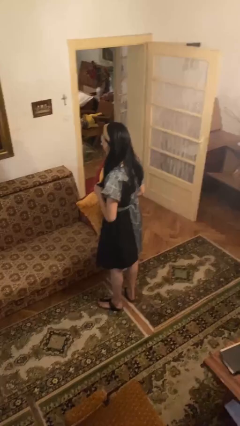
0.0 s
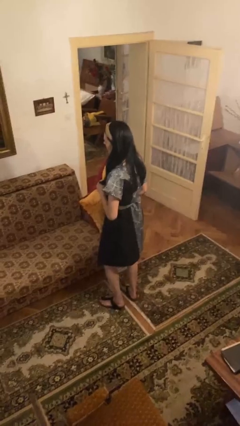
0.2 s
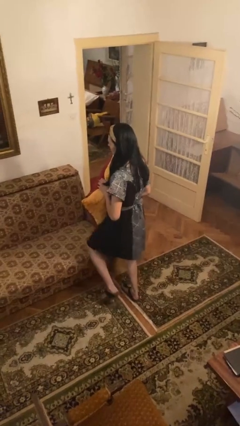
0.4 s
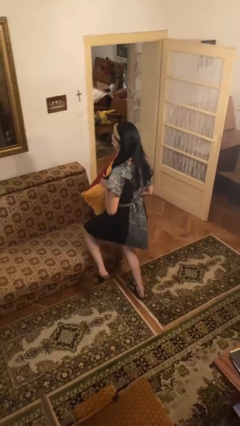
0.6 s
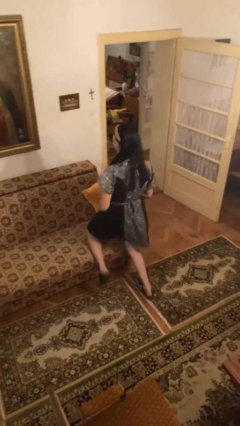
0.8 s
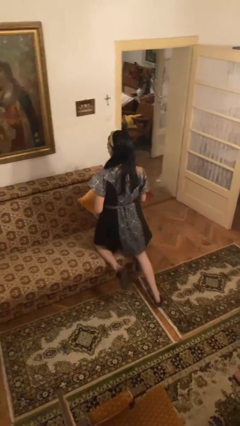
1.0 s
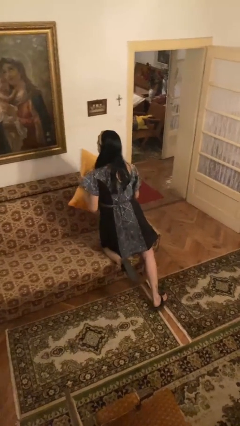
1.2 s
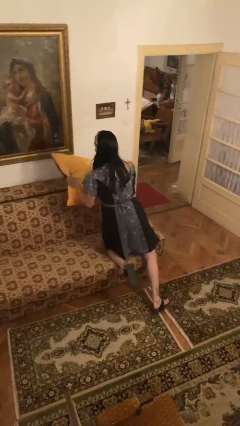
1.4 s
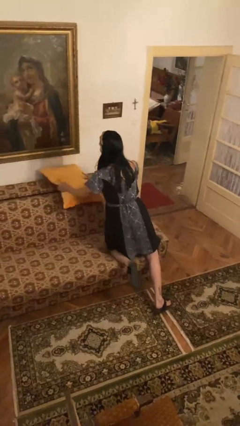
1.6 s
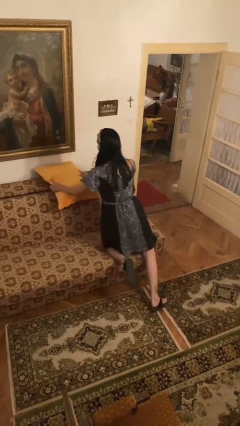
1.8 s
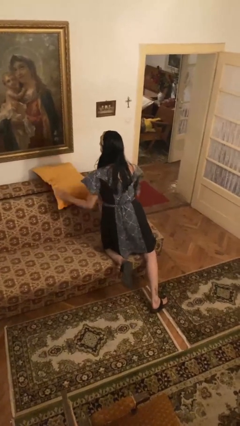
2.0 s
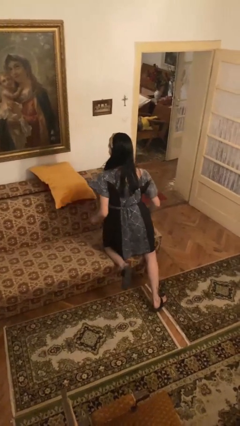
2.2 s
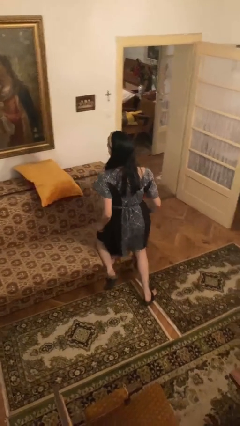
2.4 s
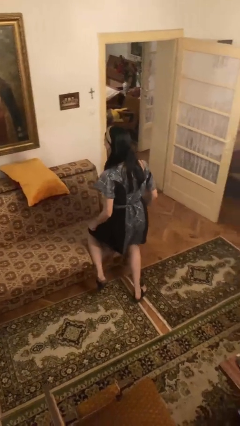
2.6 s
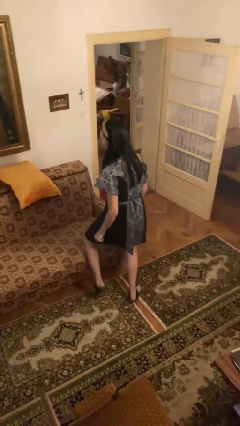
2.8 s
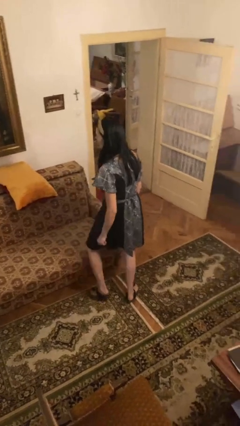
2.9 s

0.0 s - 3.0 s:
person puts down object on couch

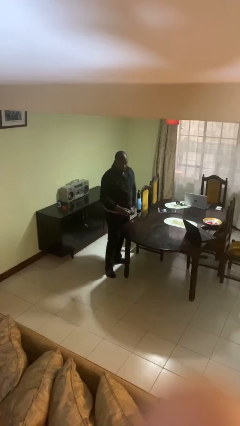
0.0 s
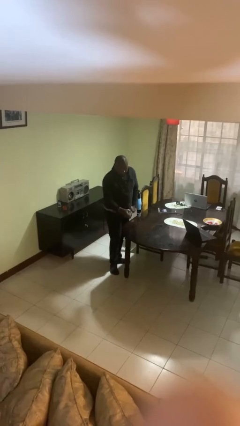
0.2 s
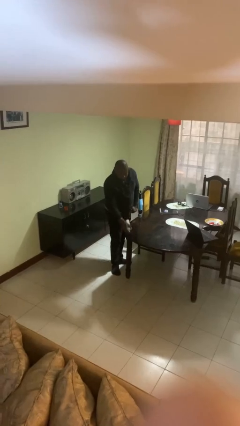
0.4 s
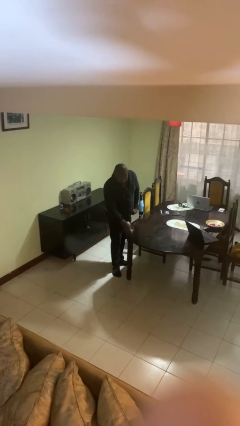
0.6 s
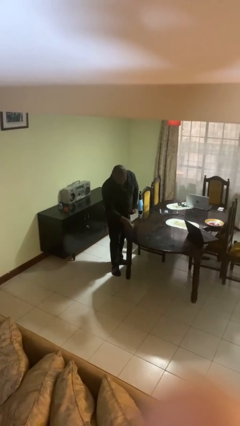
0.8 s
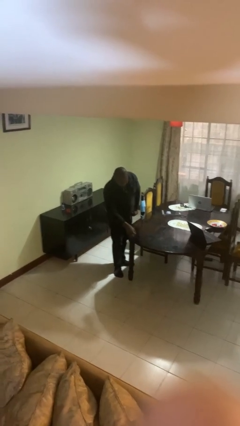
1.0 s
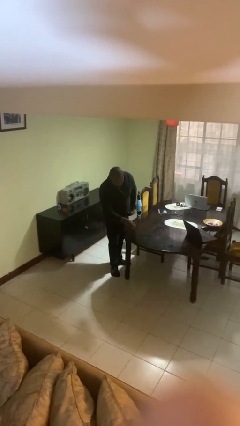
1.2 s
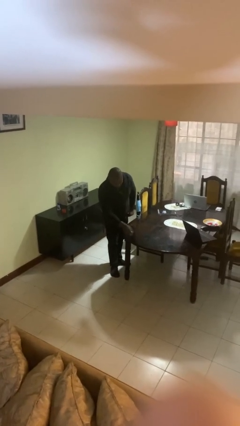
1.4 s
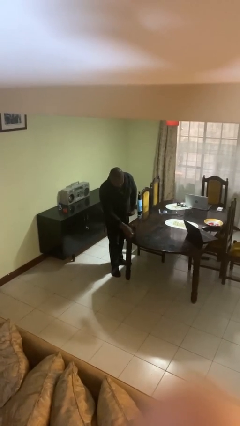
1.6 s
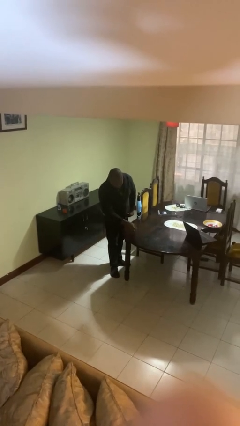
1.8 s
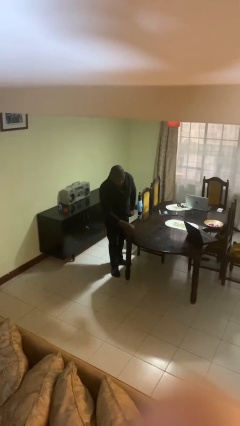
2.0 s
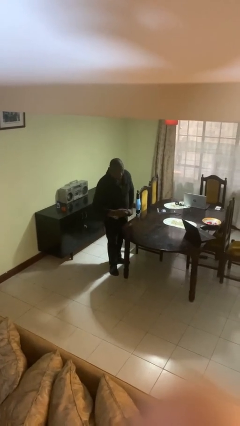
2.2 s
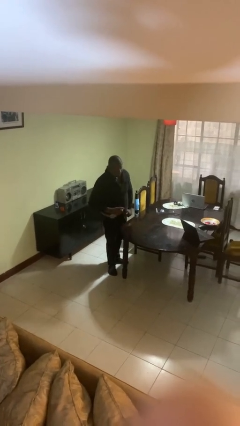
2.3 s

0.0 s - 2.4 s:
person sprays from bottle

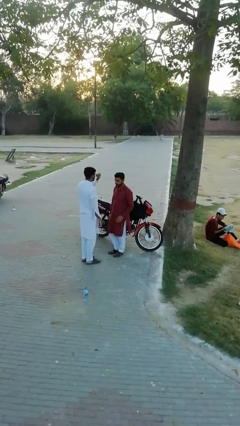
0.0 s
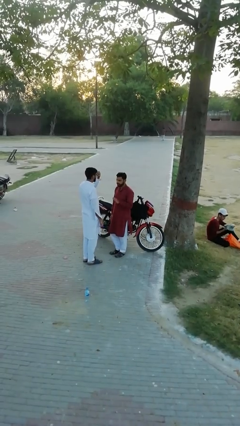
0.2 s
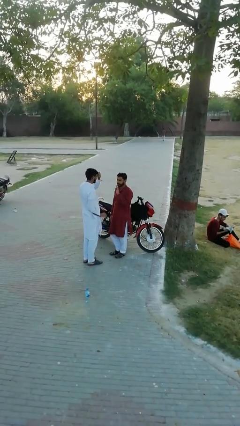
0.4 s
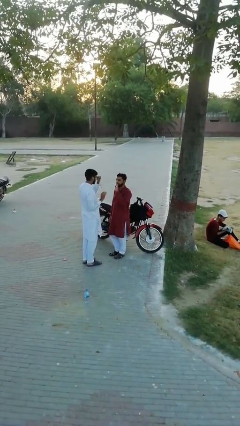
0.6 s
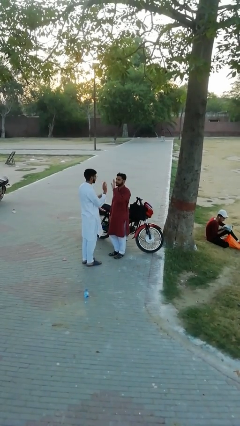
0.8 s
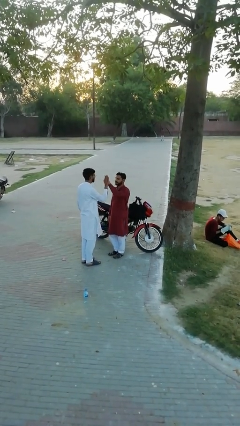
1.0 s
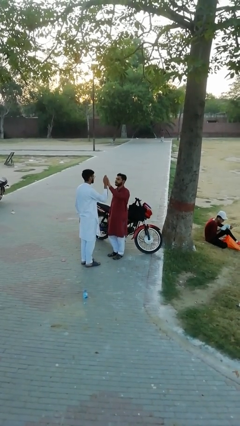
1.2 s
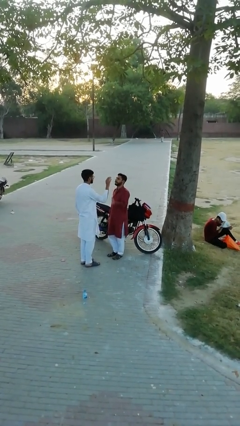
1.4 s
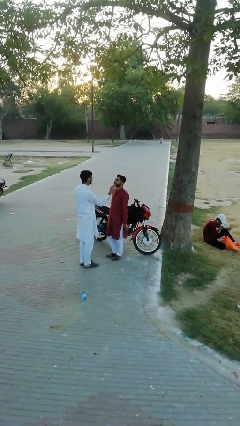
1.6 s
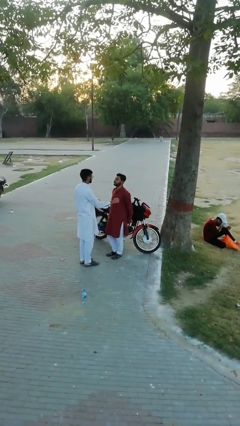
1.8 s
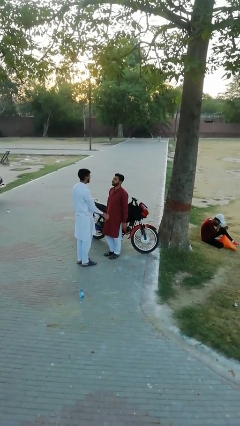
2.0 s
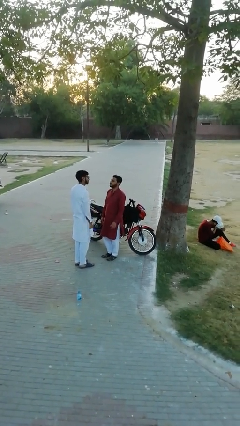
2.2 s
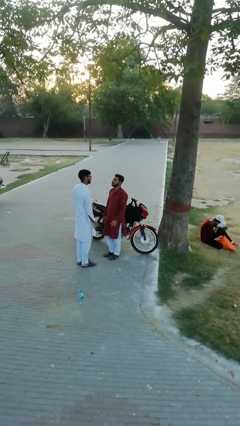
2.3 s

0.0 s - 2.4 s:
person highfives hand

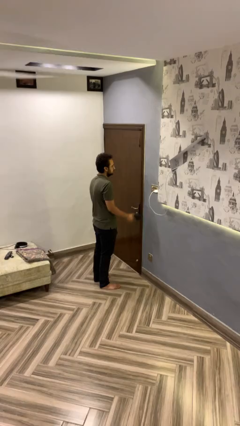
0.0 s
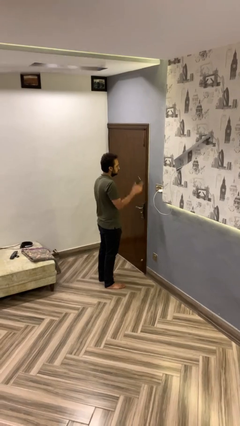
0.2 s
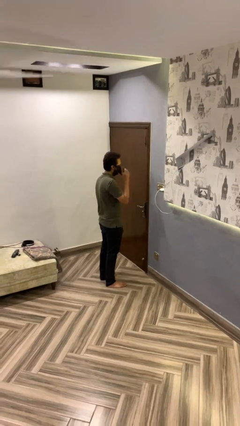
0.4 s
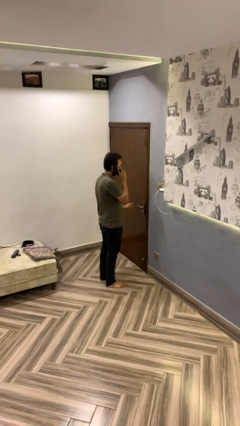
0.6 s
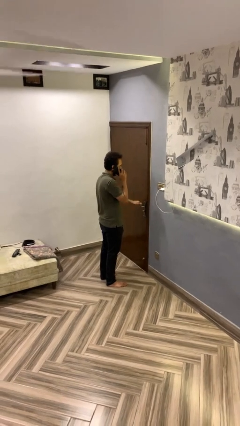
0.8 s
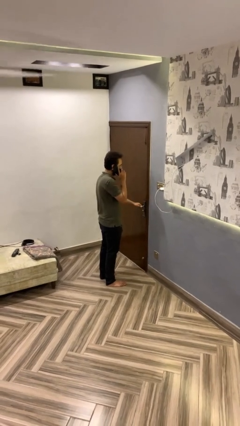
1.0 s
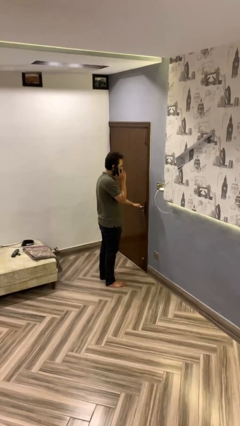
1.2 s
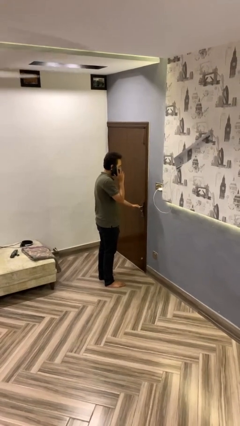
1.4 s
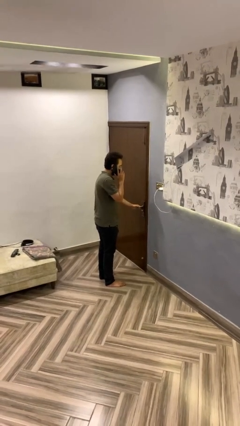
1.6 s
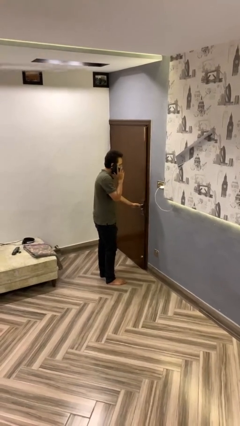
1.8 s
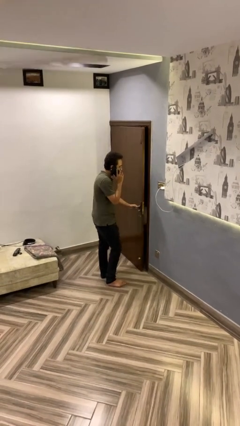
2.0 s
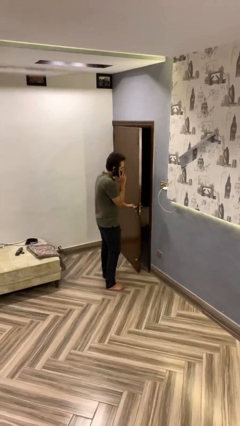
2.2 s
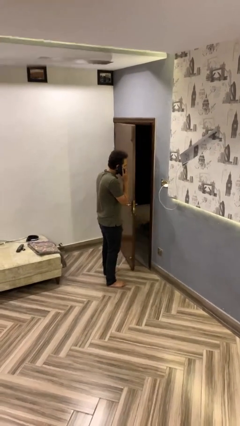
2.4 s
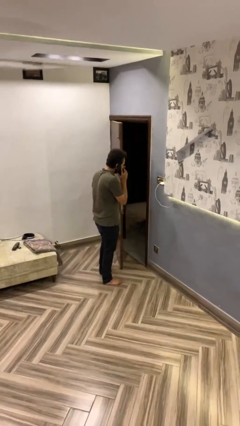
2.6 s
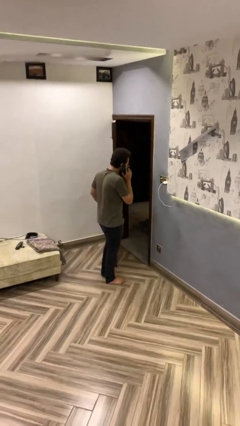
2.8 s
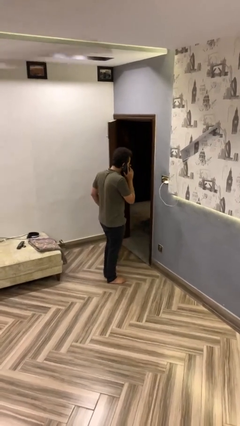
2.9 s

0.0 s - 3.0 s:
person opens facility door

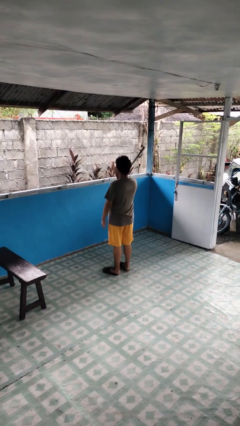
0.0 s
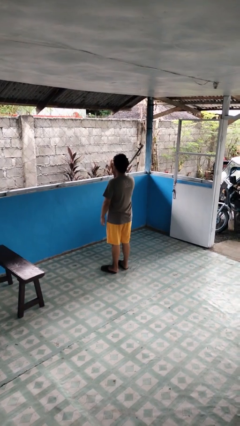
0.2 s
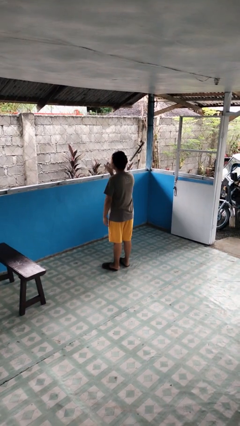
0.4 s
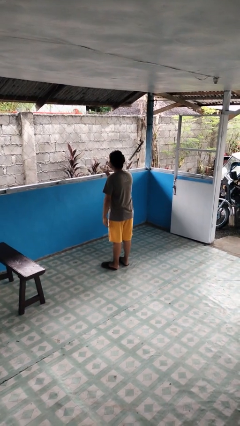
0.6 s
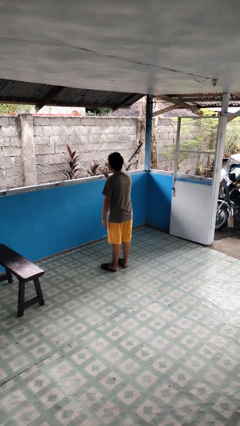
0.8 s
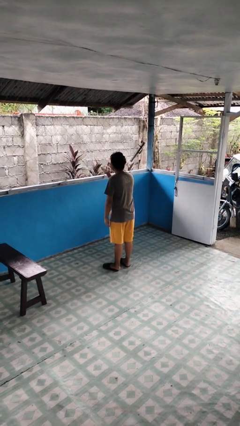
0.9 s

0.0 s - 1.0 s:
person gestures blow kiss

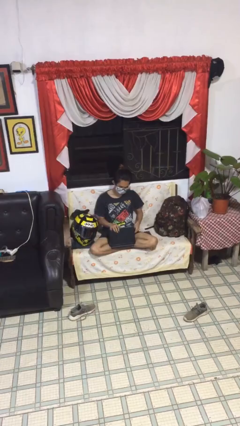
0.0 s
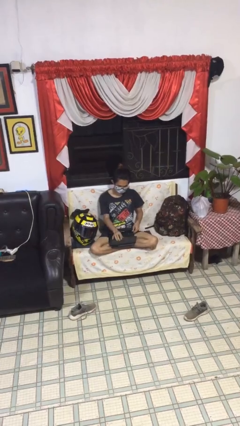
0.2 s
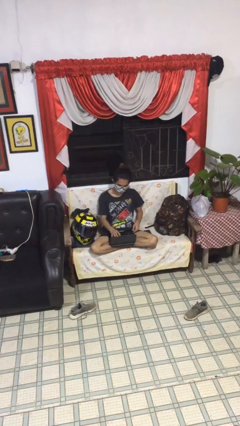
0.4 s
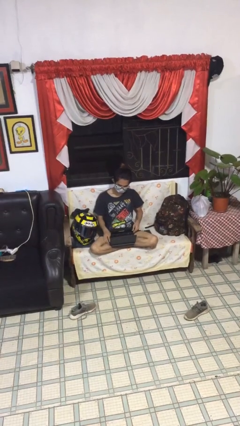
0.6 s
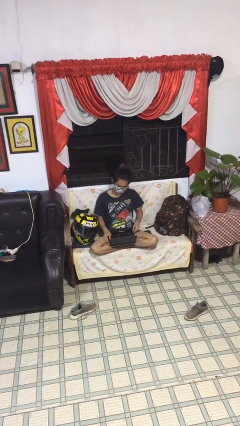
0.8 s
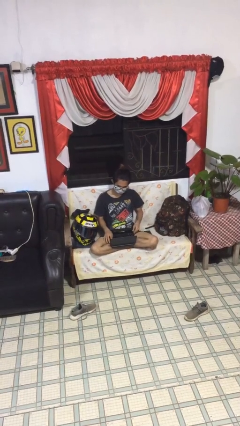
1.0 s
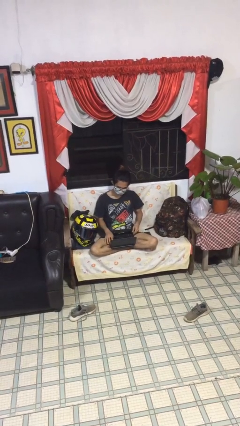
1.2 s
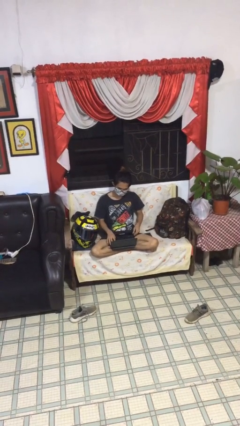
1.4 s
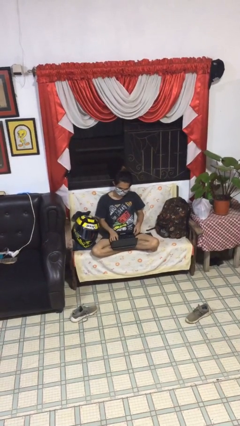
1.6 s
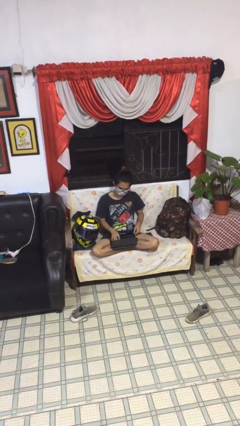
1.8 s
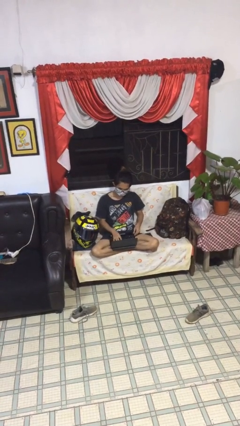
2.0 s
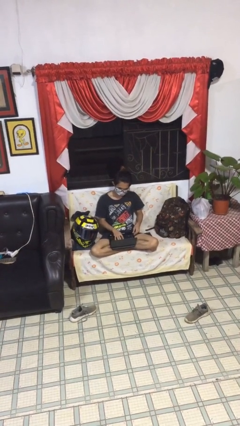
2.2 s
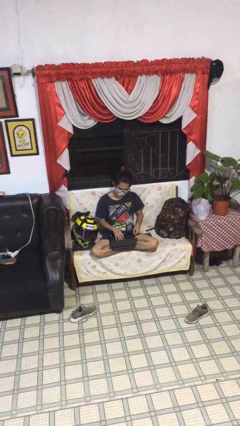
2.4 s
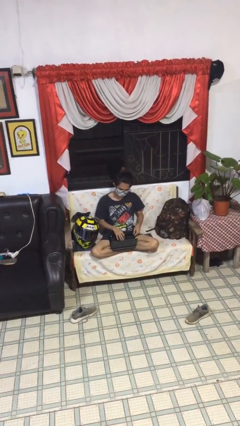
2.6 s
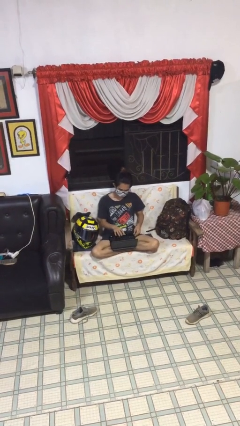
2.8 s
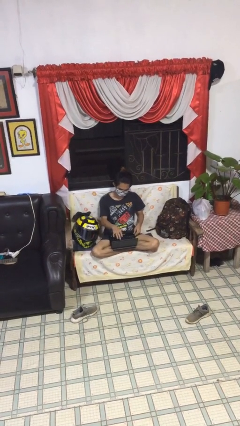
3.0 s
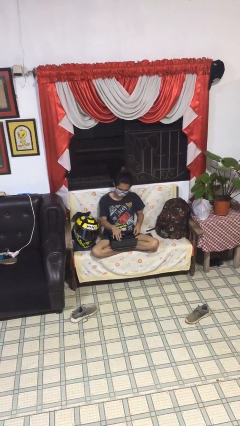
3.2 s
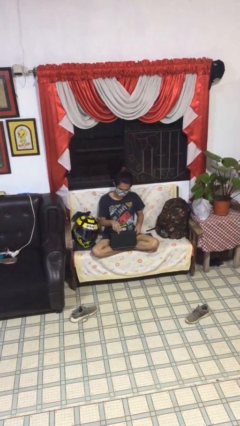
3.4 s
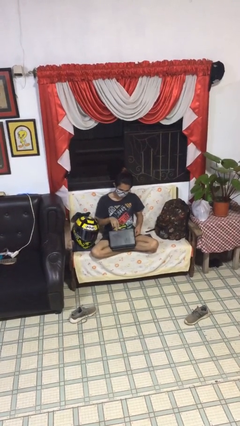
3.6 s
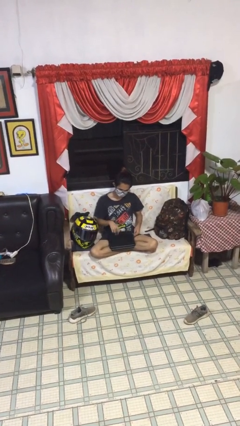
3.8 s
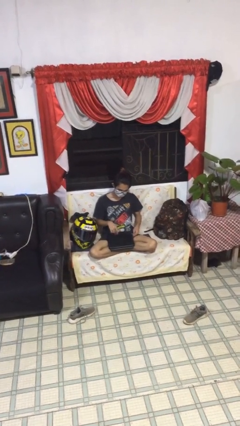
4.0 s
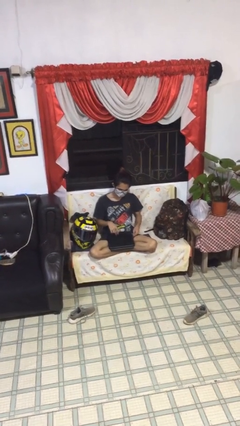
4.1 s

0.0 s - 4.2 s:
person interacts with laptop

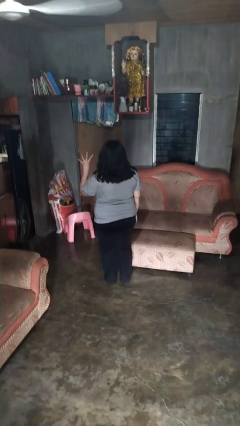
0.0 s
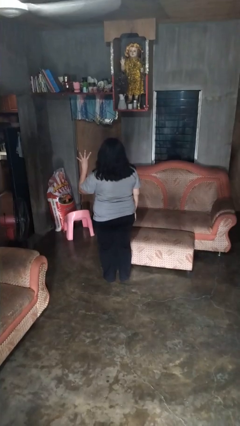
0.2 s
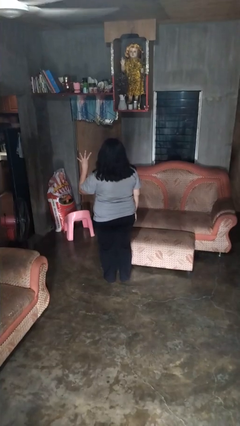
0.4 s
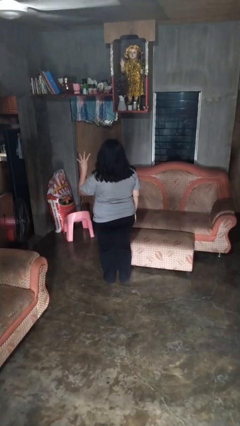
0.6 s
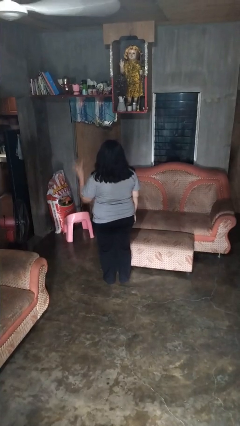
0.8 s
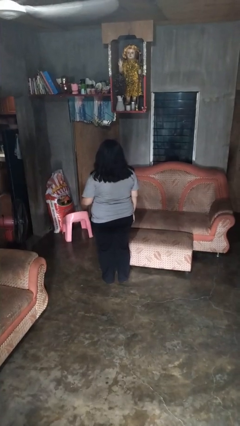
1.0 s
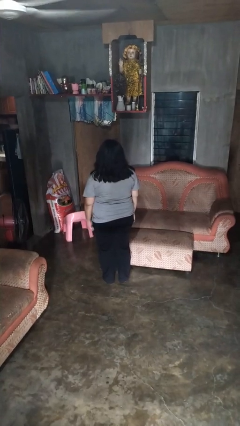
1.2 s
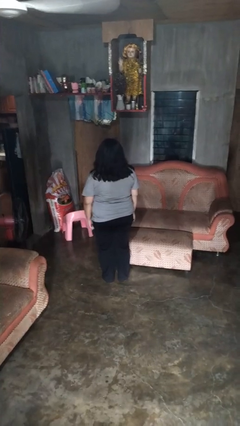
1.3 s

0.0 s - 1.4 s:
person gestures number four
